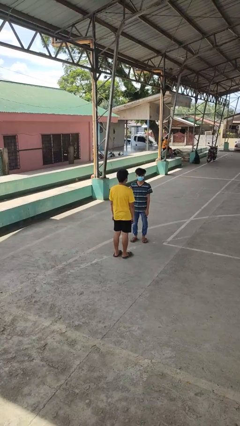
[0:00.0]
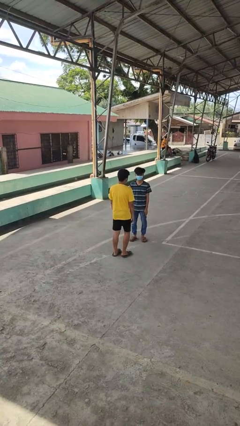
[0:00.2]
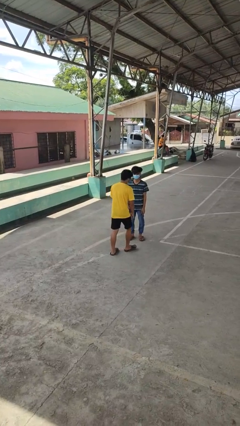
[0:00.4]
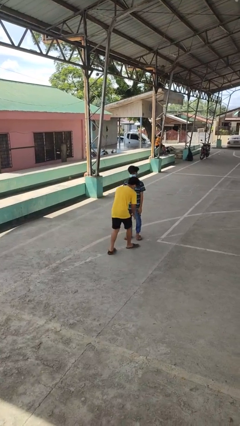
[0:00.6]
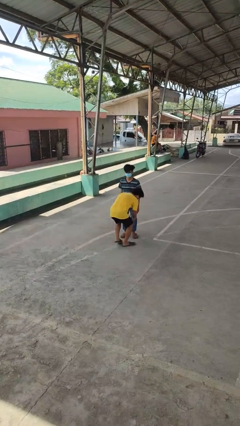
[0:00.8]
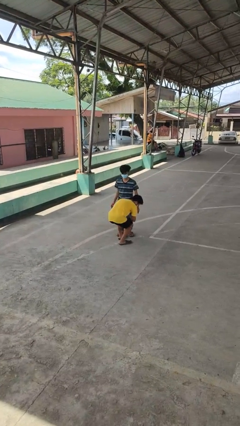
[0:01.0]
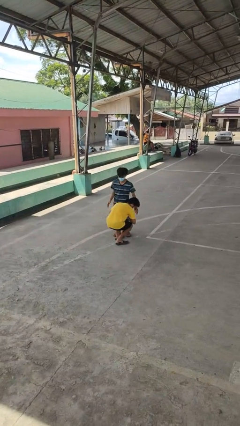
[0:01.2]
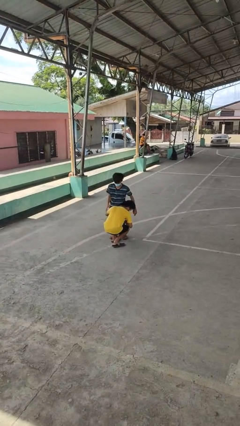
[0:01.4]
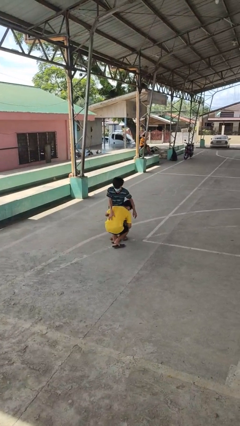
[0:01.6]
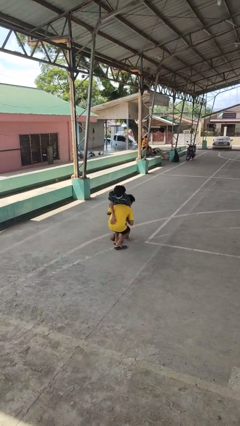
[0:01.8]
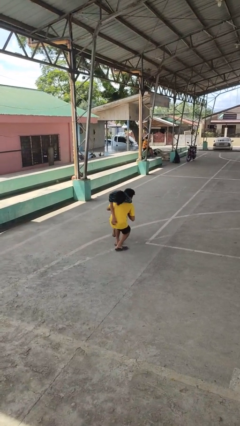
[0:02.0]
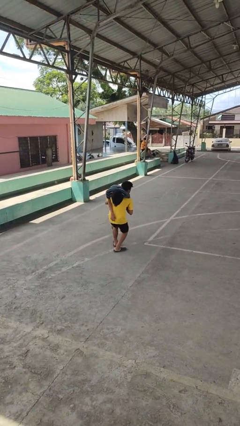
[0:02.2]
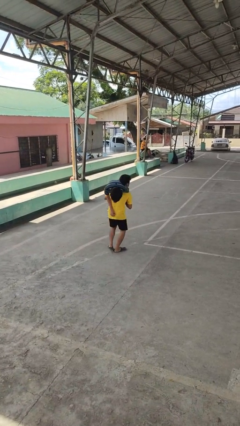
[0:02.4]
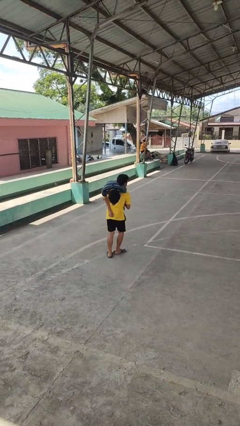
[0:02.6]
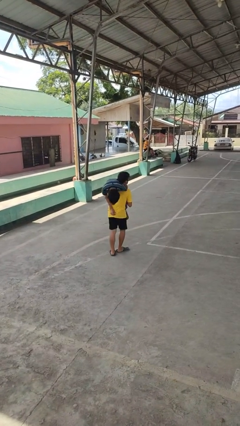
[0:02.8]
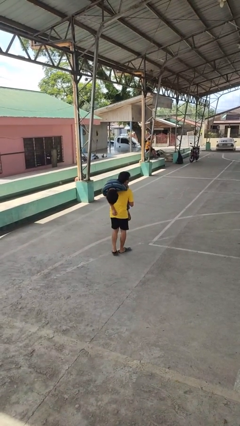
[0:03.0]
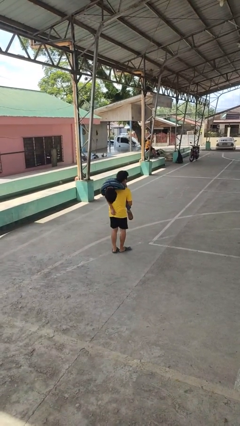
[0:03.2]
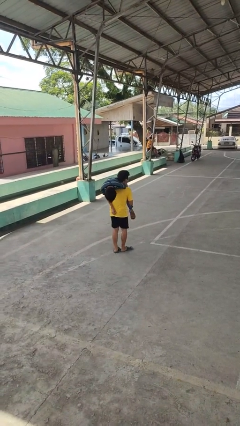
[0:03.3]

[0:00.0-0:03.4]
person carries person over shoulder

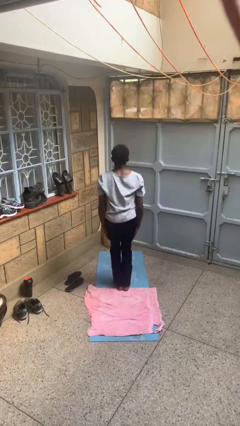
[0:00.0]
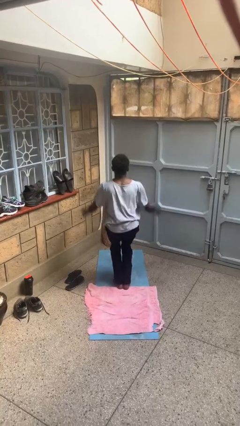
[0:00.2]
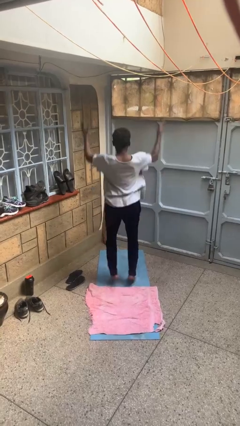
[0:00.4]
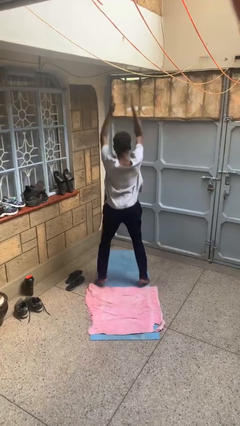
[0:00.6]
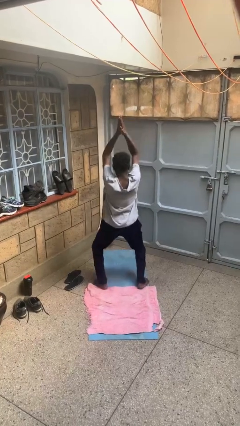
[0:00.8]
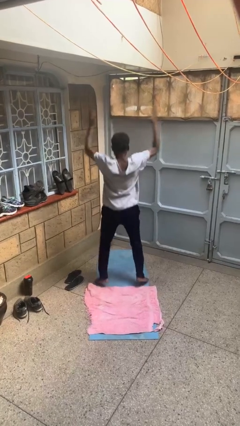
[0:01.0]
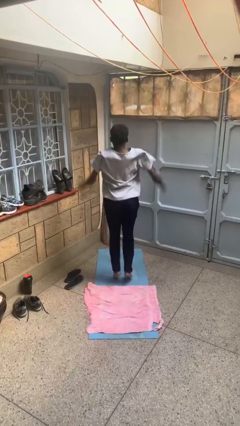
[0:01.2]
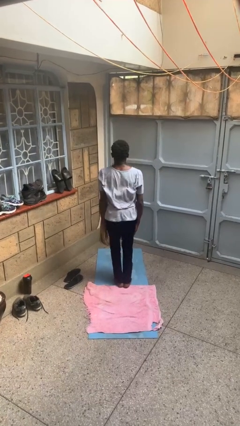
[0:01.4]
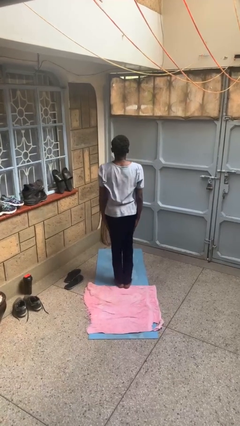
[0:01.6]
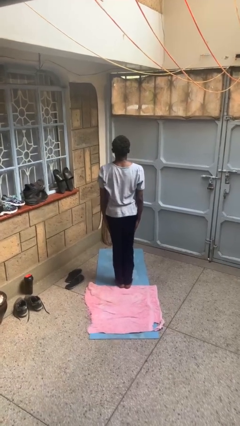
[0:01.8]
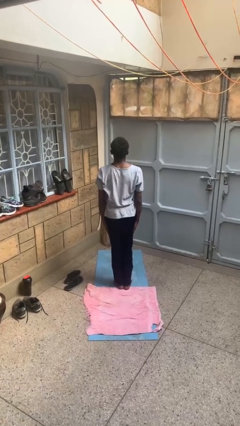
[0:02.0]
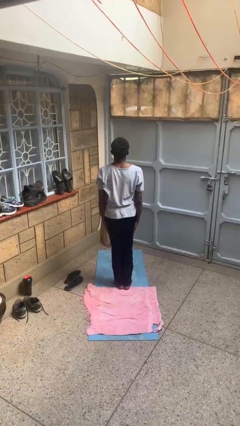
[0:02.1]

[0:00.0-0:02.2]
person exercises with jumping jacks

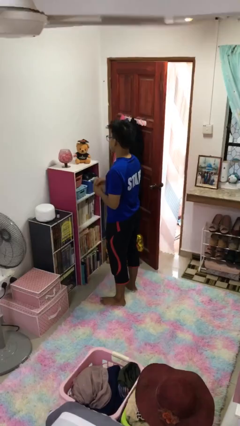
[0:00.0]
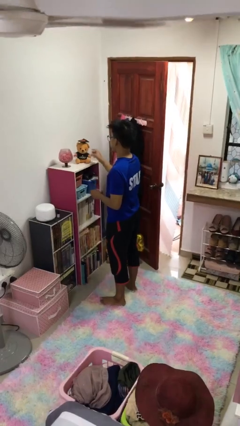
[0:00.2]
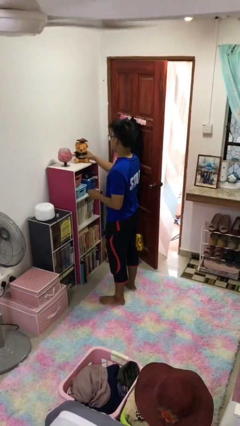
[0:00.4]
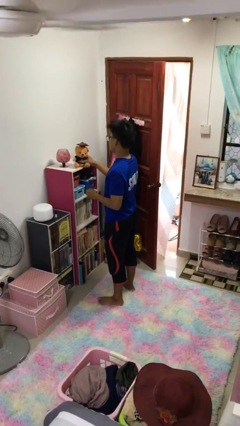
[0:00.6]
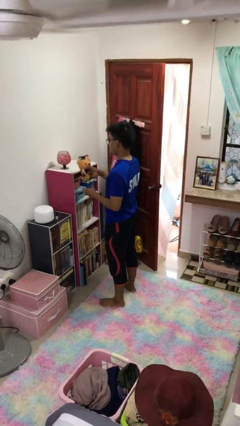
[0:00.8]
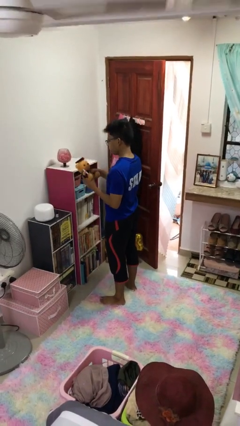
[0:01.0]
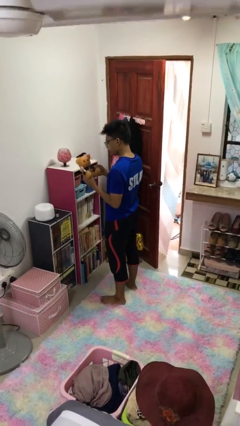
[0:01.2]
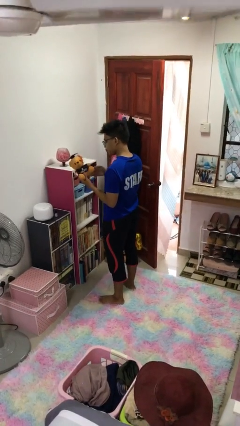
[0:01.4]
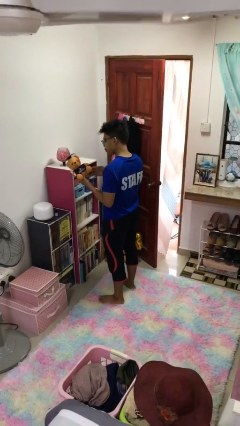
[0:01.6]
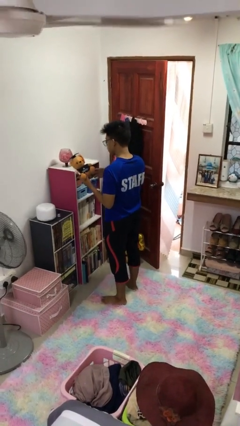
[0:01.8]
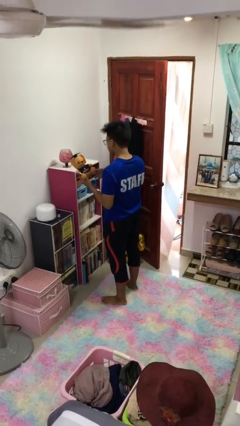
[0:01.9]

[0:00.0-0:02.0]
person picks up object from shelf

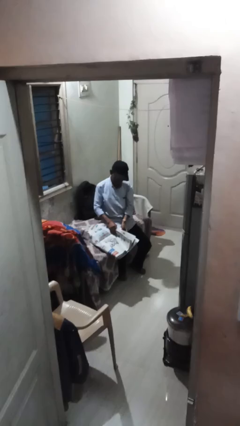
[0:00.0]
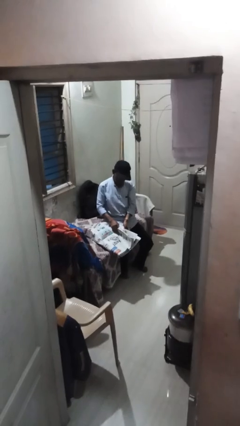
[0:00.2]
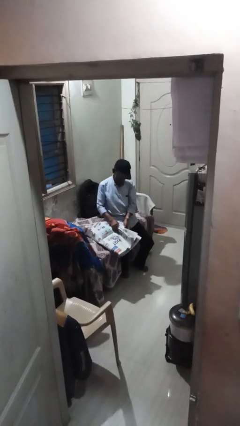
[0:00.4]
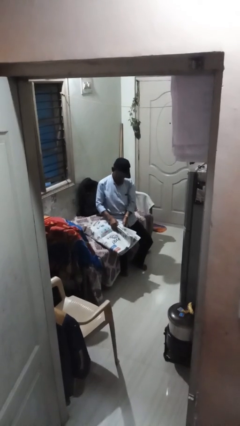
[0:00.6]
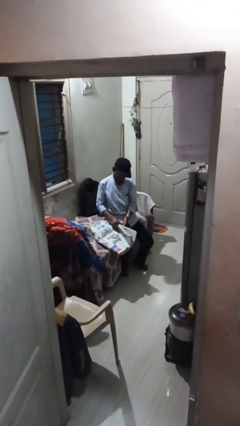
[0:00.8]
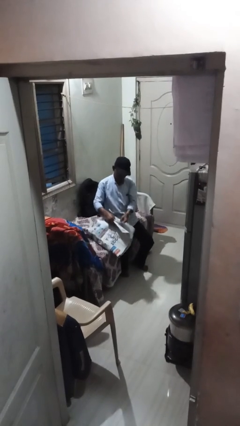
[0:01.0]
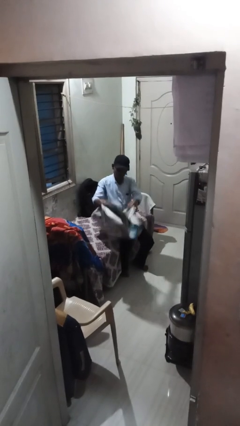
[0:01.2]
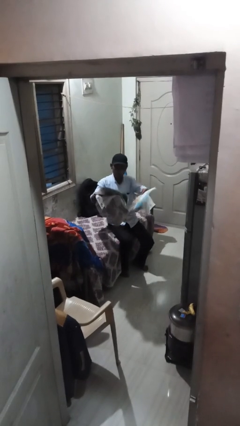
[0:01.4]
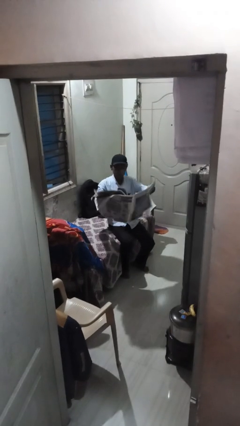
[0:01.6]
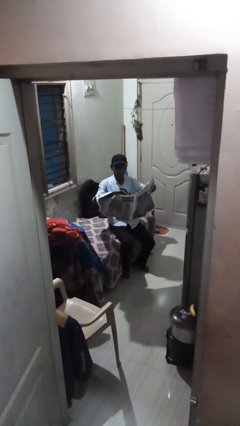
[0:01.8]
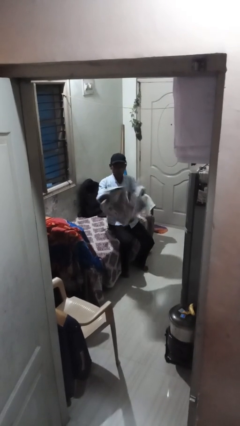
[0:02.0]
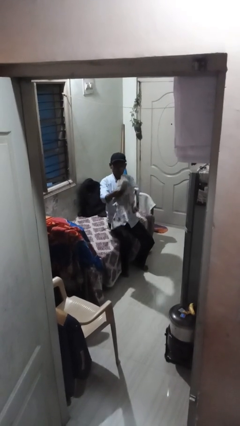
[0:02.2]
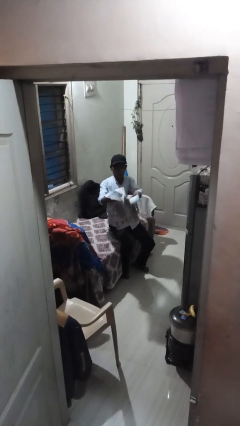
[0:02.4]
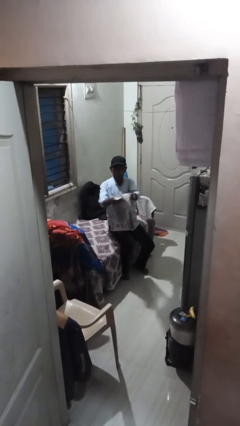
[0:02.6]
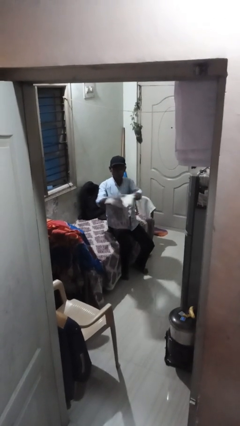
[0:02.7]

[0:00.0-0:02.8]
person reads newspaper

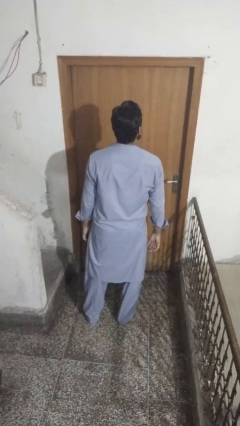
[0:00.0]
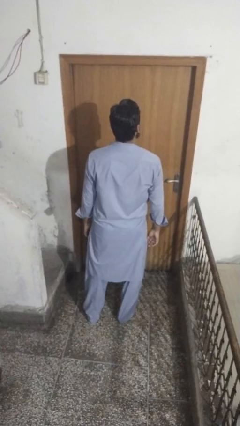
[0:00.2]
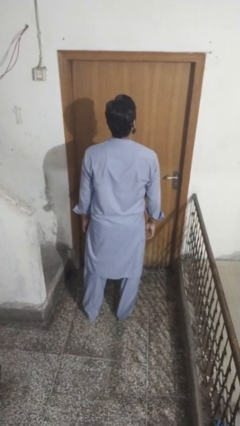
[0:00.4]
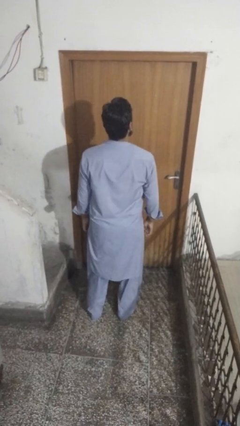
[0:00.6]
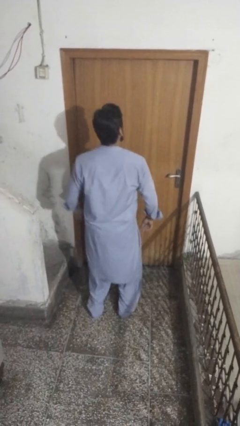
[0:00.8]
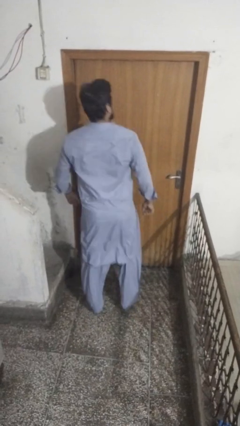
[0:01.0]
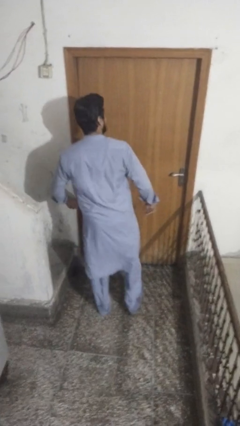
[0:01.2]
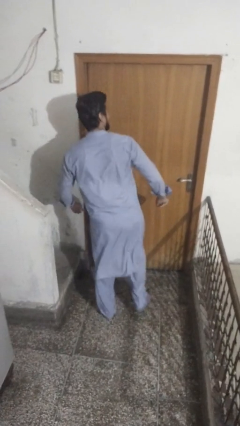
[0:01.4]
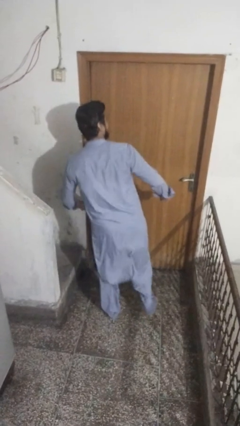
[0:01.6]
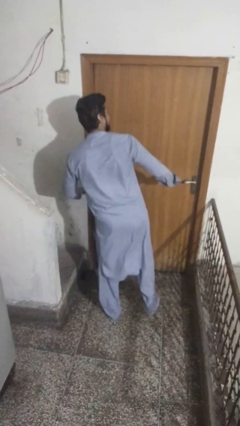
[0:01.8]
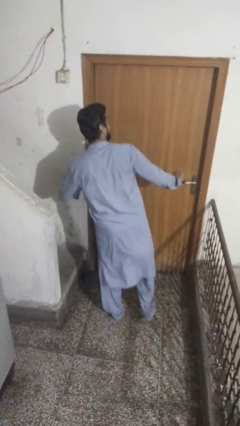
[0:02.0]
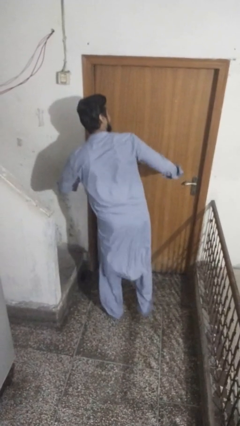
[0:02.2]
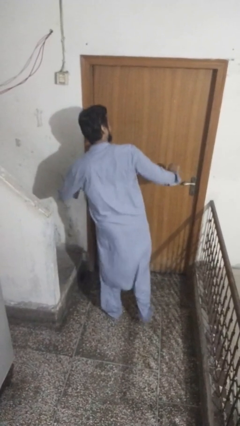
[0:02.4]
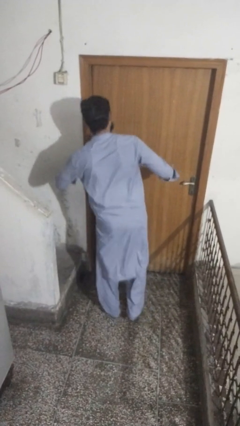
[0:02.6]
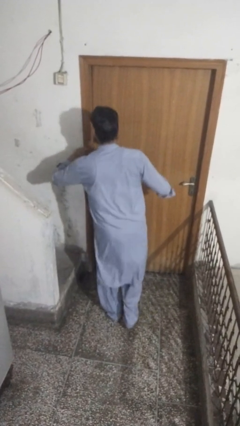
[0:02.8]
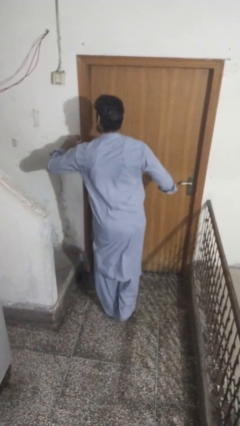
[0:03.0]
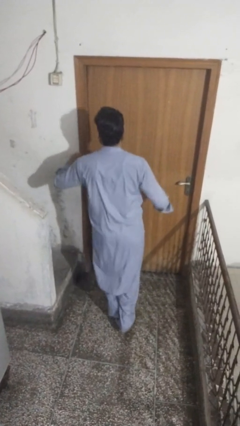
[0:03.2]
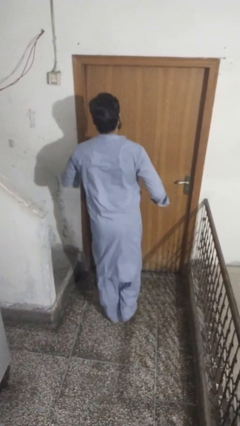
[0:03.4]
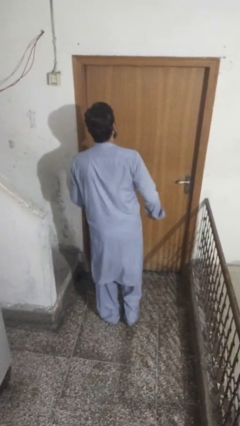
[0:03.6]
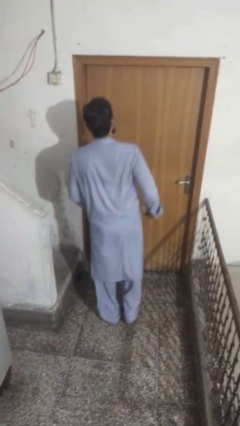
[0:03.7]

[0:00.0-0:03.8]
person dances in place

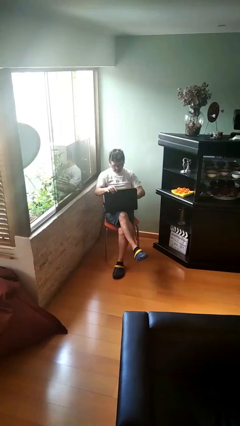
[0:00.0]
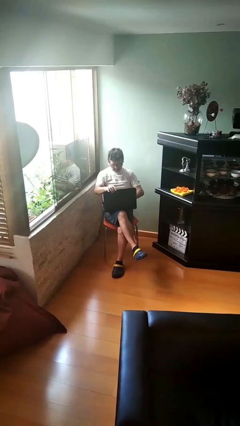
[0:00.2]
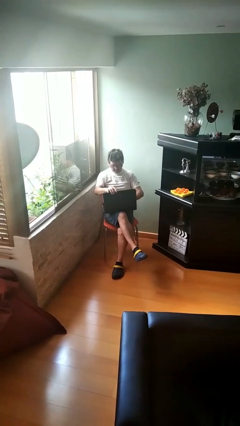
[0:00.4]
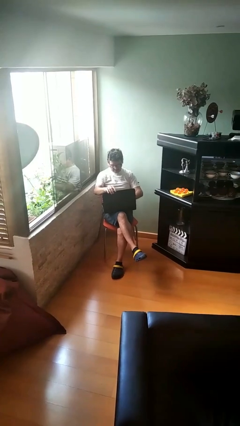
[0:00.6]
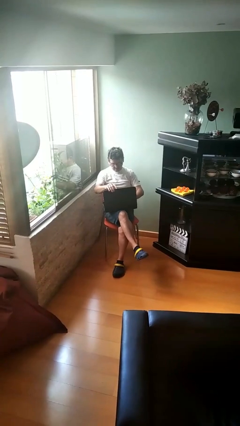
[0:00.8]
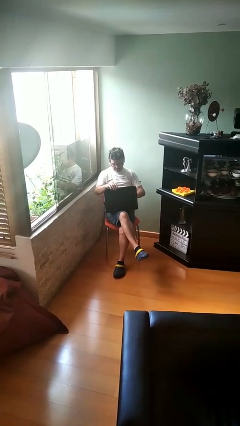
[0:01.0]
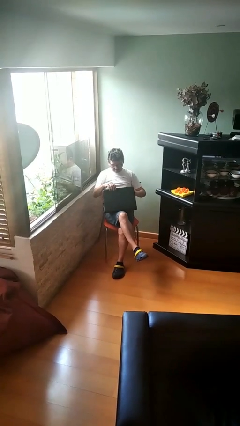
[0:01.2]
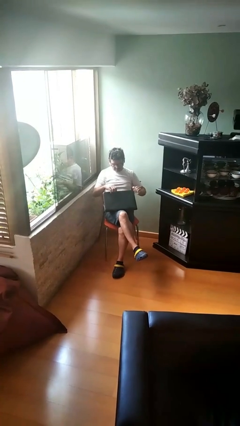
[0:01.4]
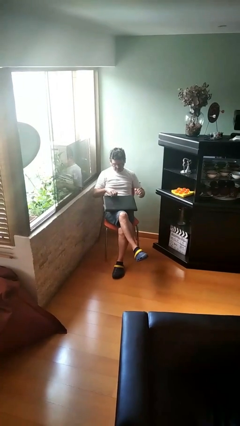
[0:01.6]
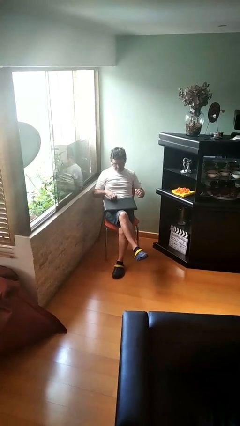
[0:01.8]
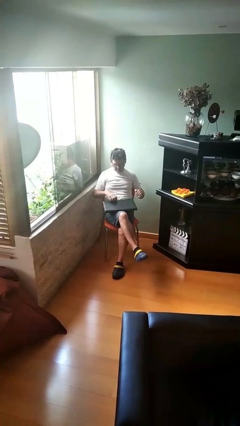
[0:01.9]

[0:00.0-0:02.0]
person interacts with laptop

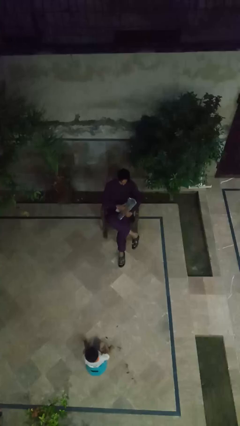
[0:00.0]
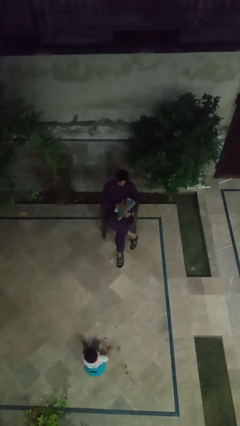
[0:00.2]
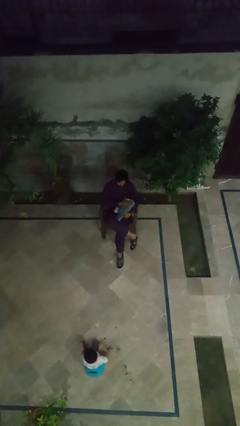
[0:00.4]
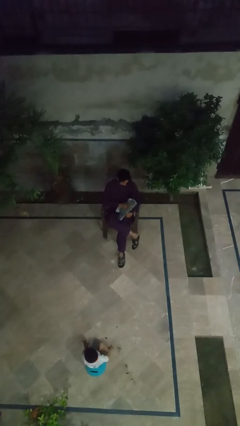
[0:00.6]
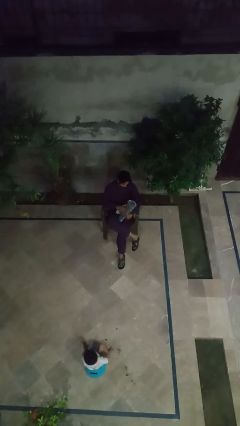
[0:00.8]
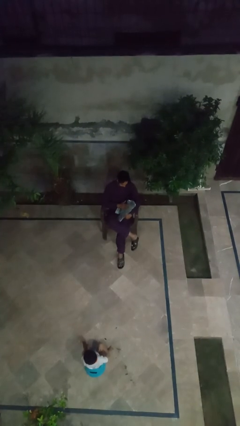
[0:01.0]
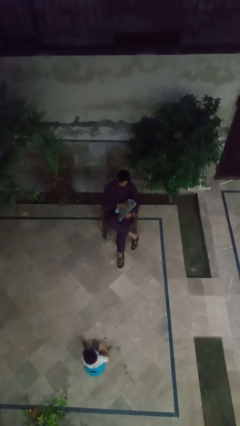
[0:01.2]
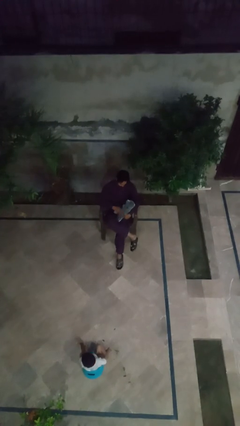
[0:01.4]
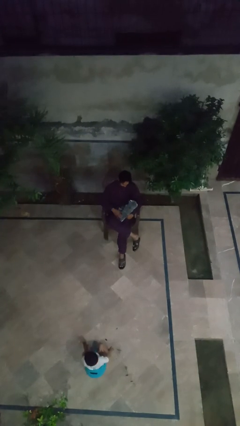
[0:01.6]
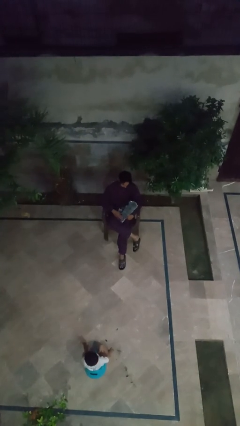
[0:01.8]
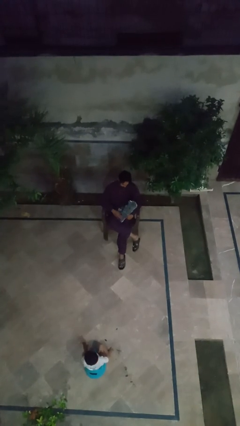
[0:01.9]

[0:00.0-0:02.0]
person pets cat
